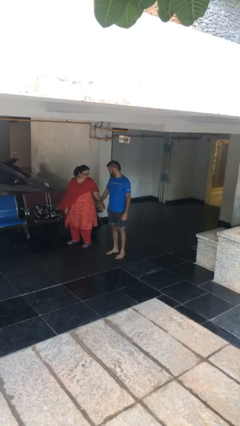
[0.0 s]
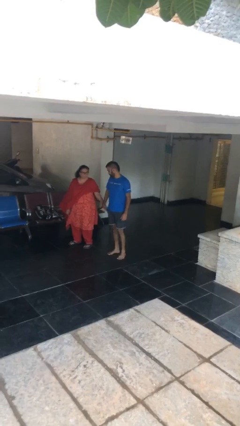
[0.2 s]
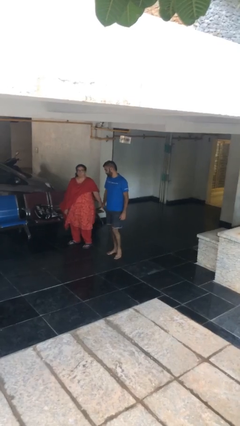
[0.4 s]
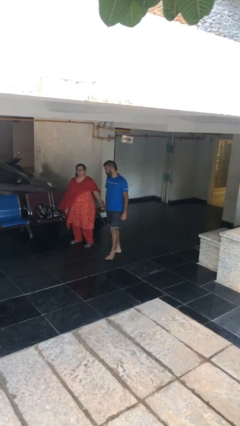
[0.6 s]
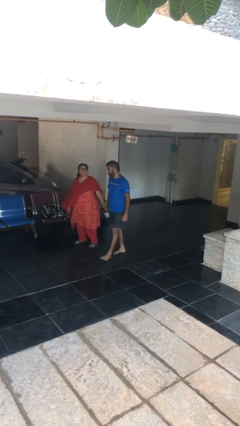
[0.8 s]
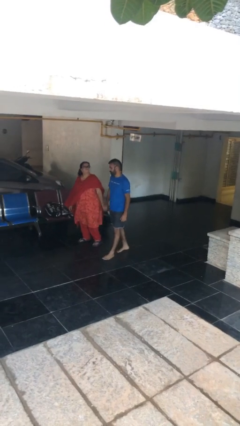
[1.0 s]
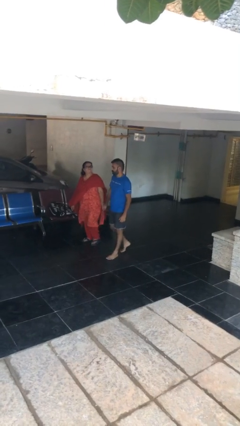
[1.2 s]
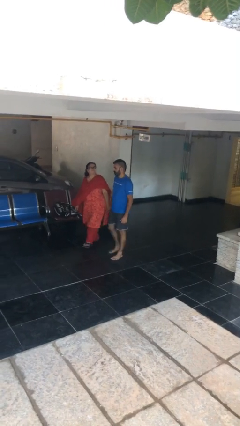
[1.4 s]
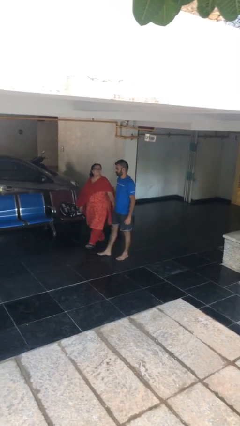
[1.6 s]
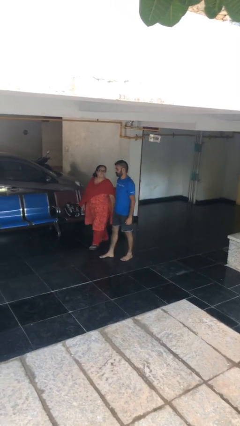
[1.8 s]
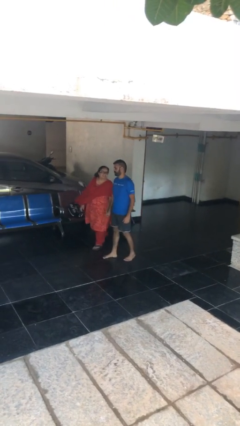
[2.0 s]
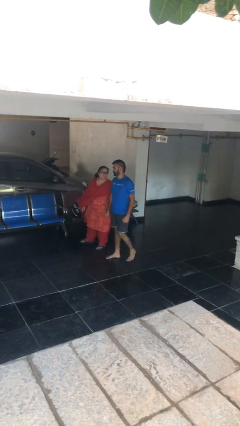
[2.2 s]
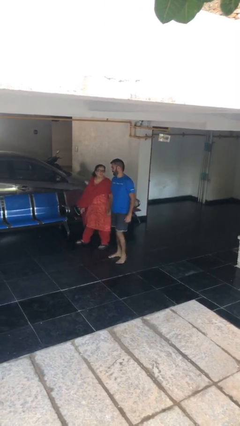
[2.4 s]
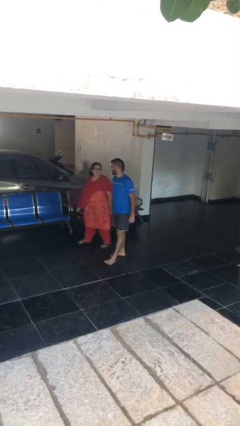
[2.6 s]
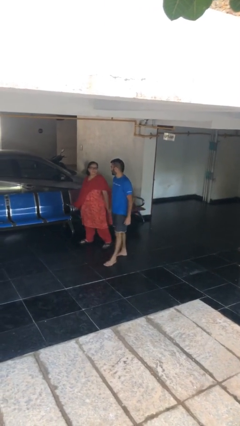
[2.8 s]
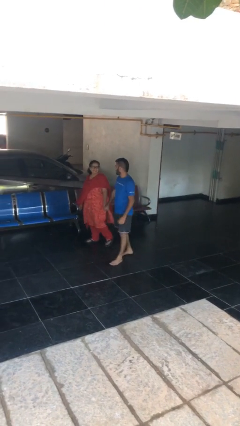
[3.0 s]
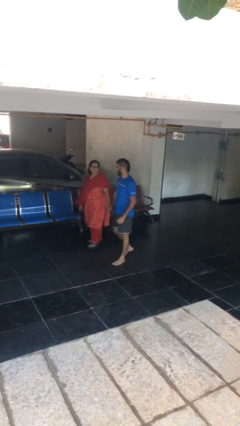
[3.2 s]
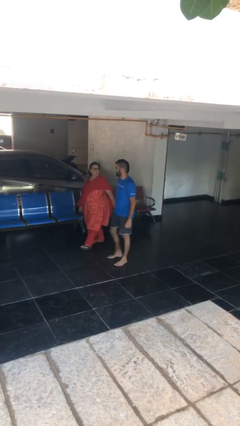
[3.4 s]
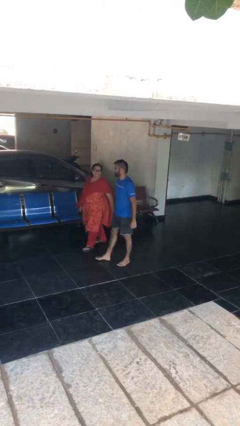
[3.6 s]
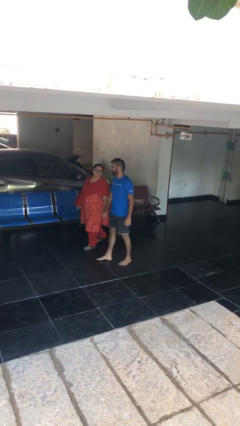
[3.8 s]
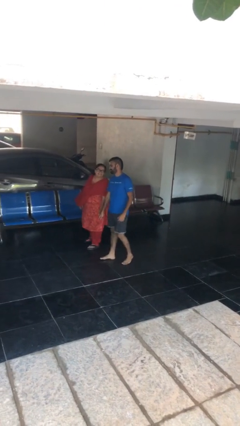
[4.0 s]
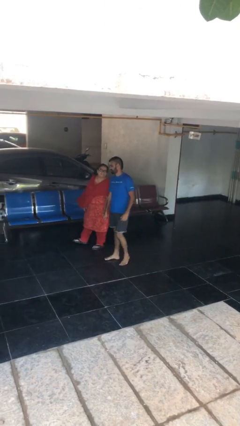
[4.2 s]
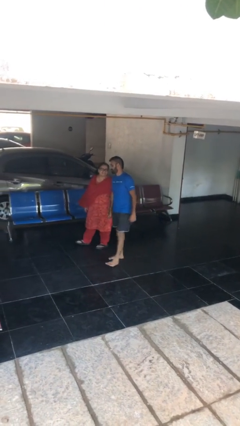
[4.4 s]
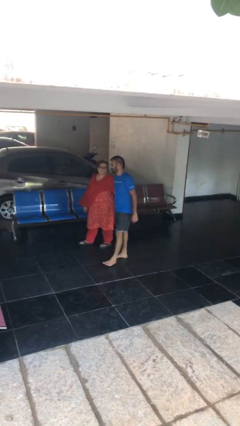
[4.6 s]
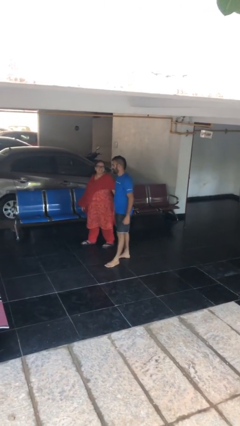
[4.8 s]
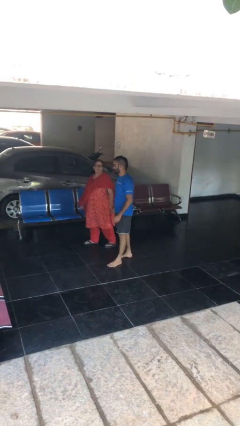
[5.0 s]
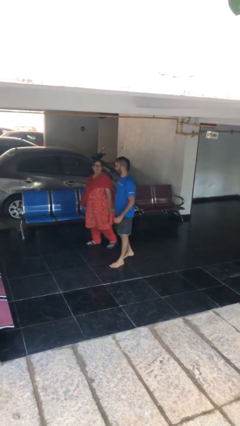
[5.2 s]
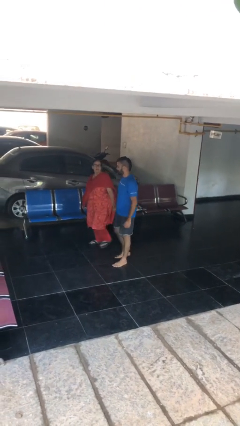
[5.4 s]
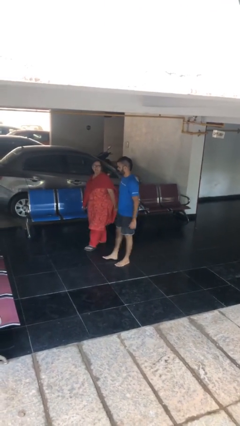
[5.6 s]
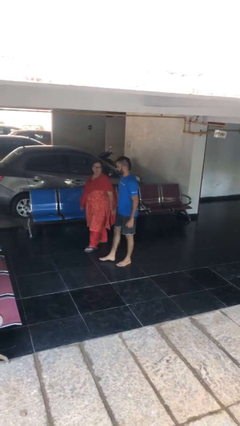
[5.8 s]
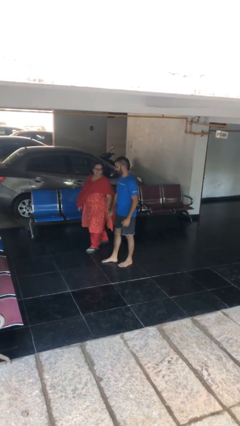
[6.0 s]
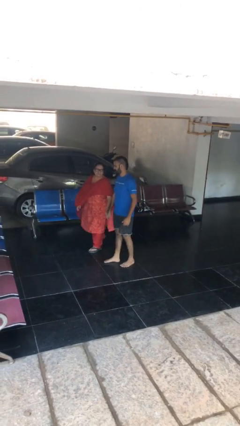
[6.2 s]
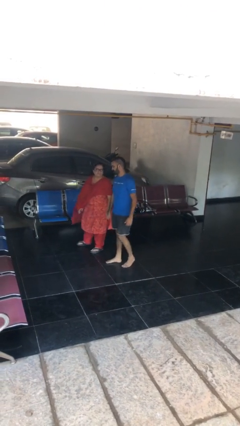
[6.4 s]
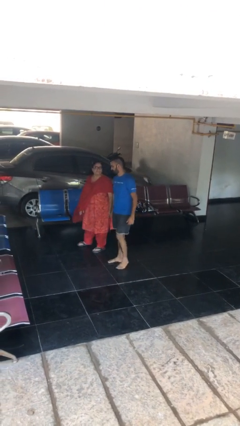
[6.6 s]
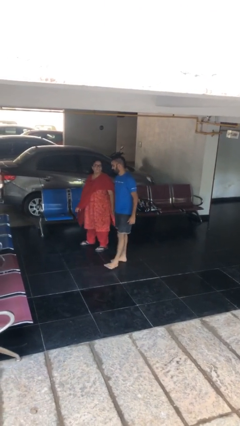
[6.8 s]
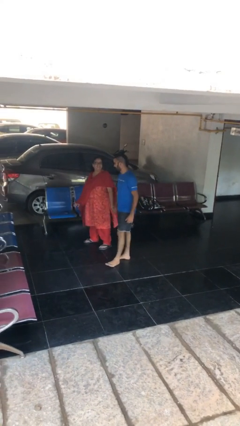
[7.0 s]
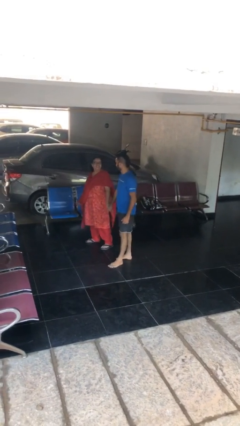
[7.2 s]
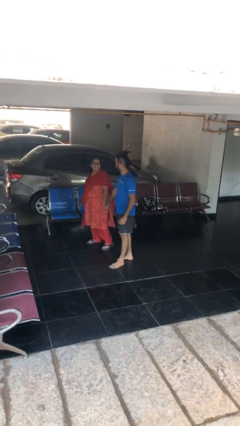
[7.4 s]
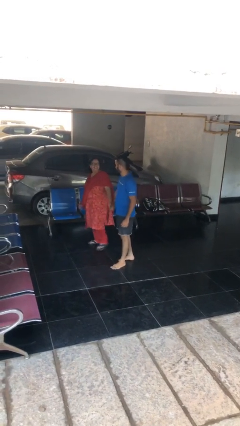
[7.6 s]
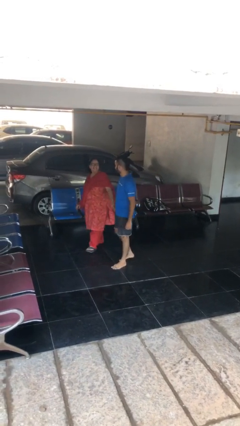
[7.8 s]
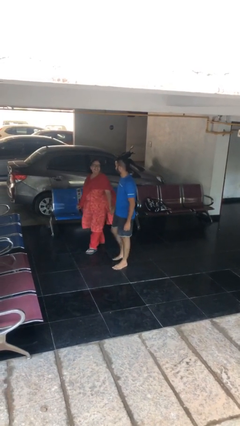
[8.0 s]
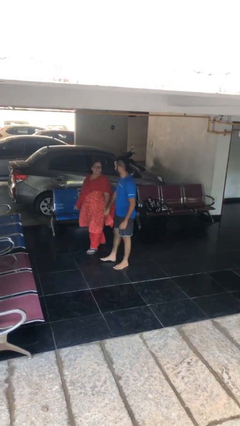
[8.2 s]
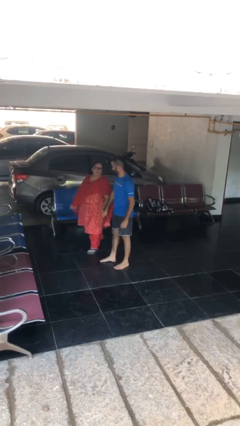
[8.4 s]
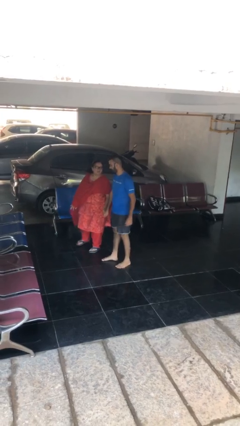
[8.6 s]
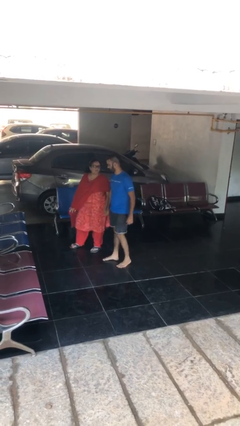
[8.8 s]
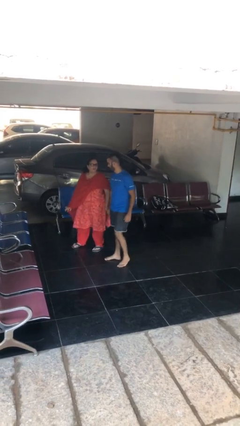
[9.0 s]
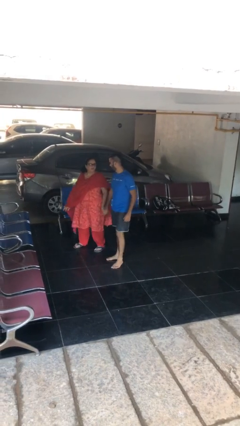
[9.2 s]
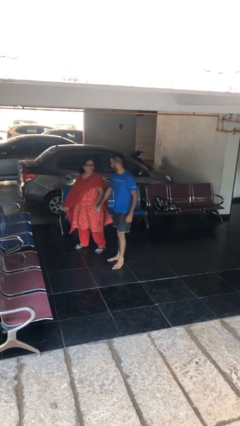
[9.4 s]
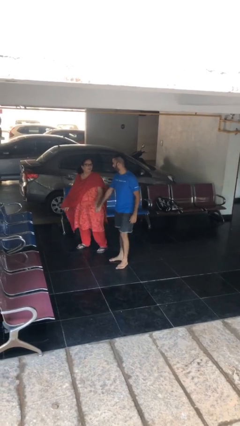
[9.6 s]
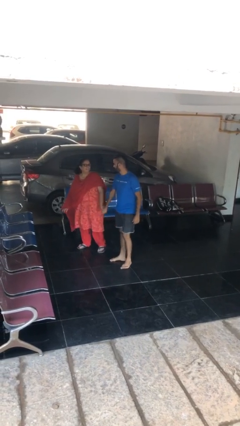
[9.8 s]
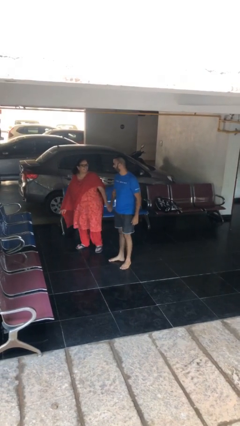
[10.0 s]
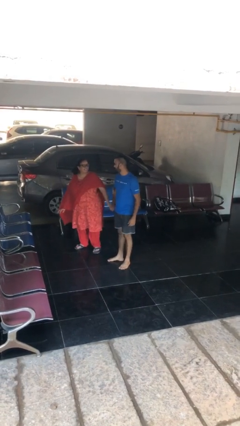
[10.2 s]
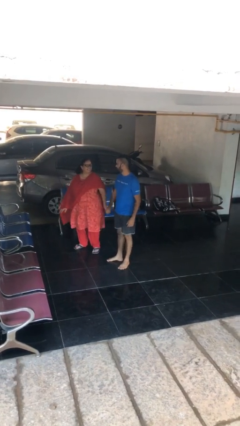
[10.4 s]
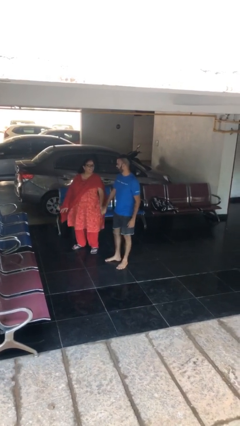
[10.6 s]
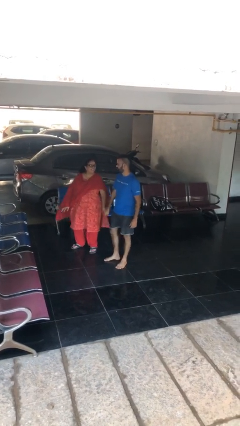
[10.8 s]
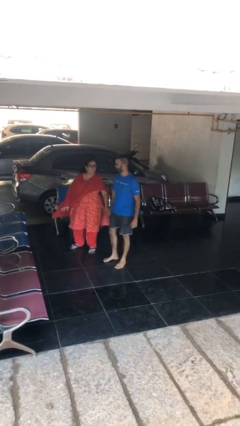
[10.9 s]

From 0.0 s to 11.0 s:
person holds hand

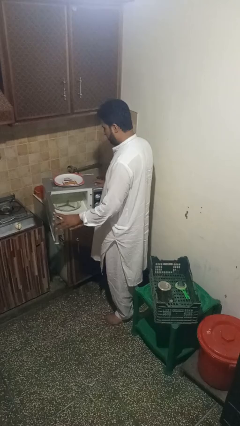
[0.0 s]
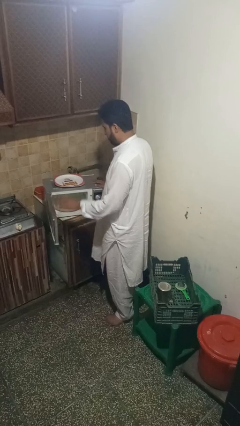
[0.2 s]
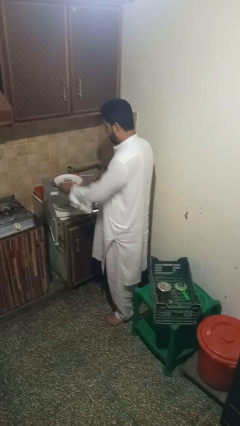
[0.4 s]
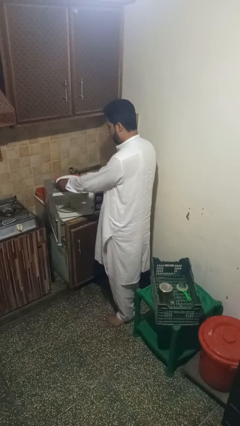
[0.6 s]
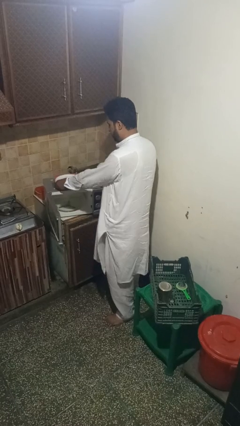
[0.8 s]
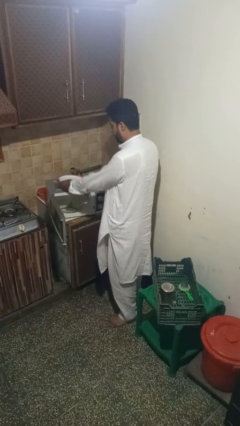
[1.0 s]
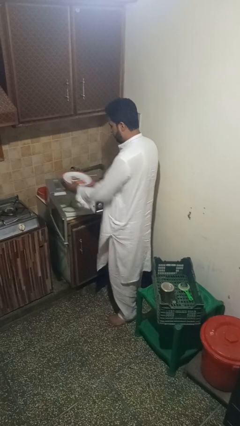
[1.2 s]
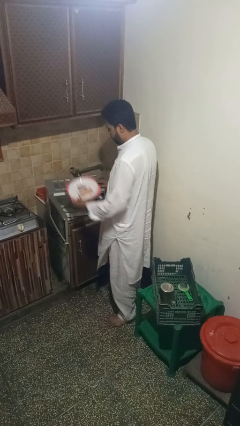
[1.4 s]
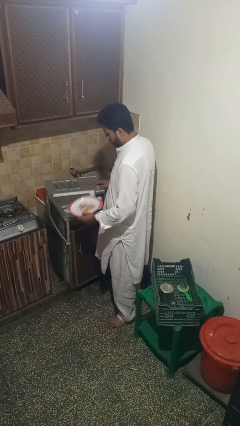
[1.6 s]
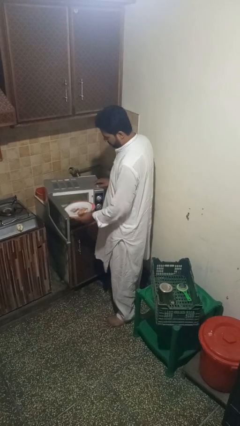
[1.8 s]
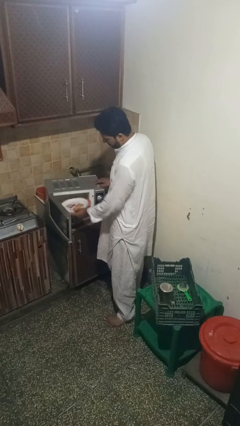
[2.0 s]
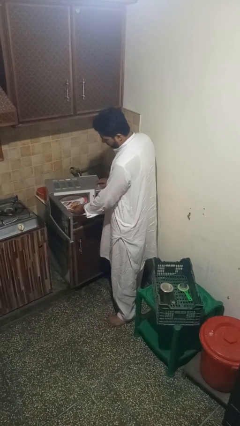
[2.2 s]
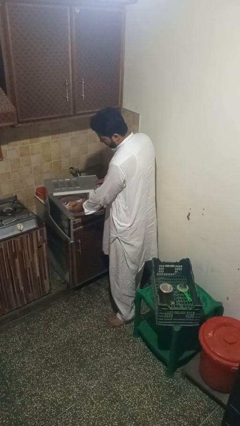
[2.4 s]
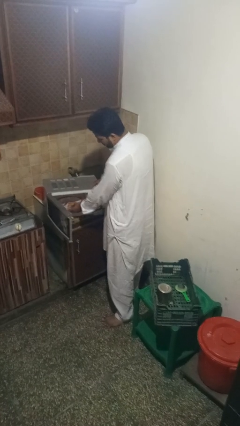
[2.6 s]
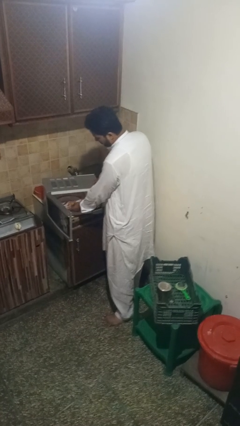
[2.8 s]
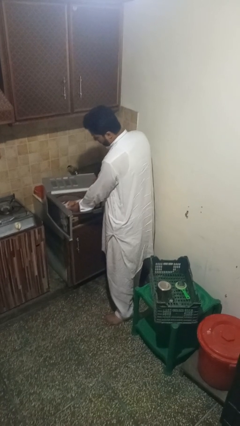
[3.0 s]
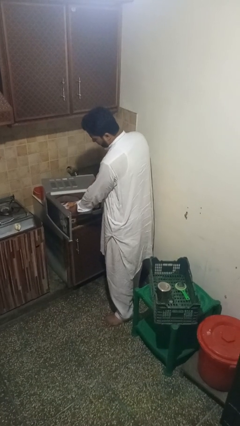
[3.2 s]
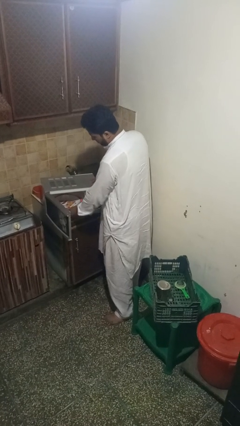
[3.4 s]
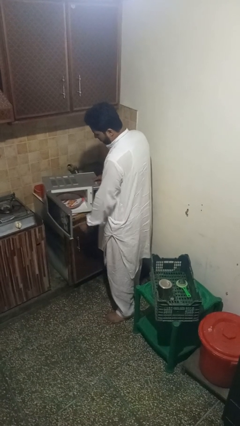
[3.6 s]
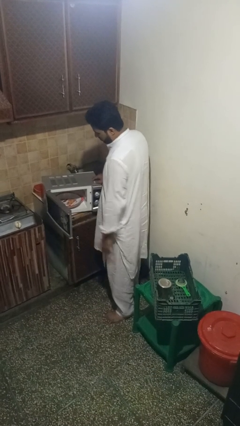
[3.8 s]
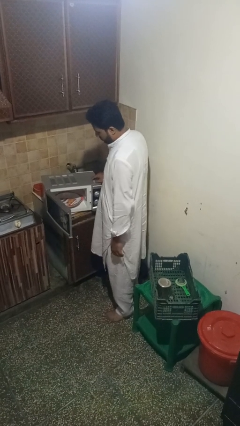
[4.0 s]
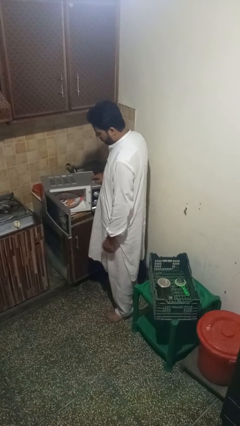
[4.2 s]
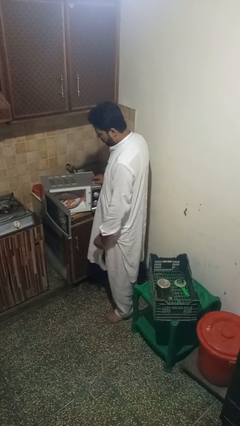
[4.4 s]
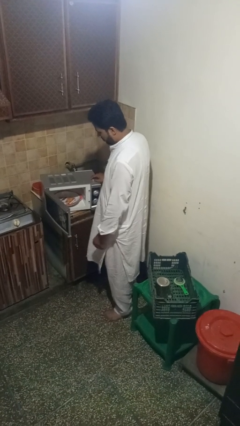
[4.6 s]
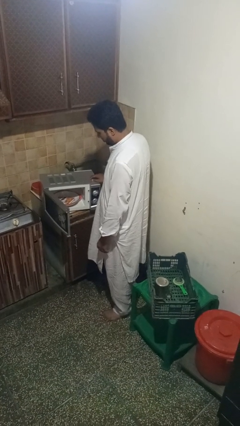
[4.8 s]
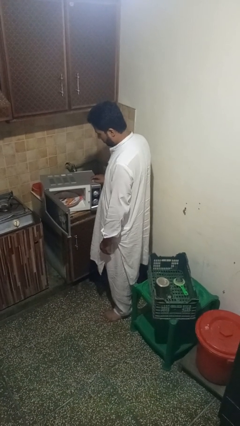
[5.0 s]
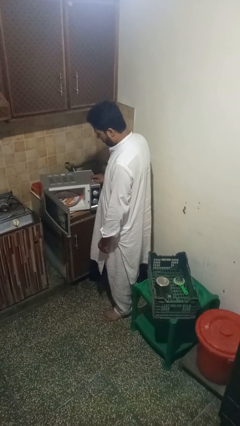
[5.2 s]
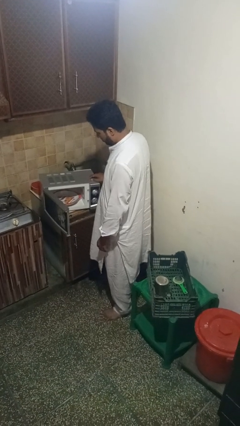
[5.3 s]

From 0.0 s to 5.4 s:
person puts object into microwave

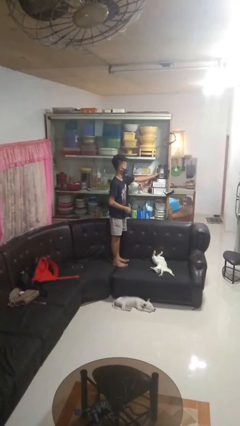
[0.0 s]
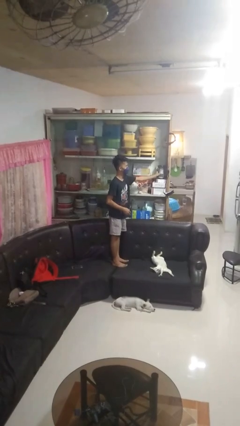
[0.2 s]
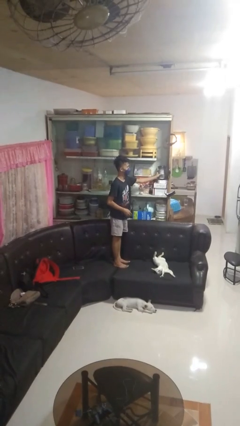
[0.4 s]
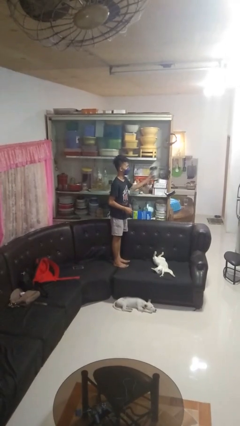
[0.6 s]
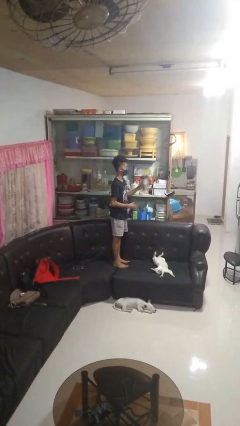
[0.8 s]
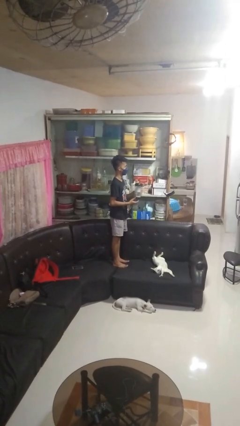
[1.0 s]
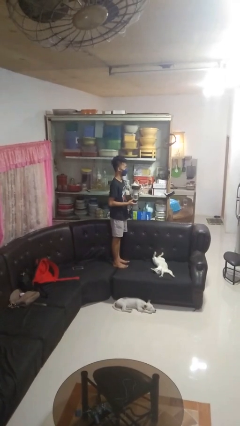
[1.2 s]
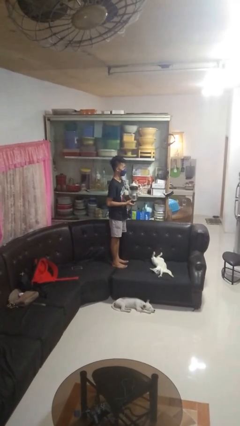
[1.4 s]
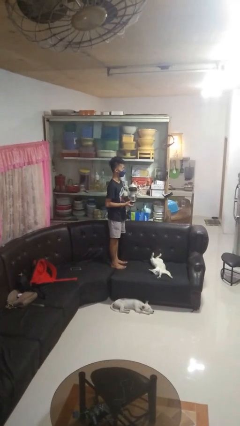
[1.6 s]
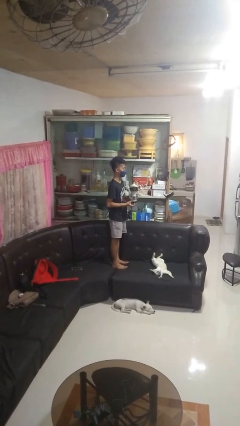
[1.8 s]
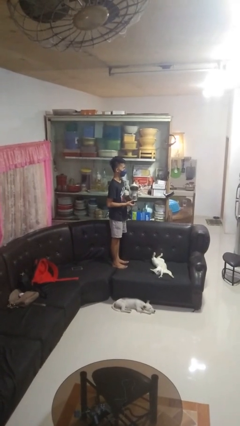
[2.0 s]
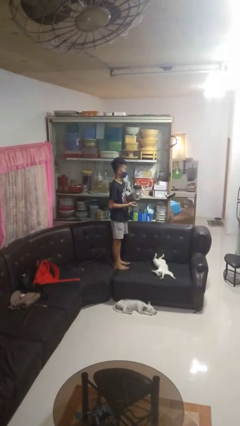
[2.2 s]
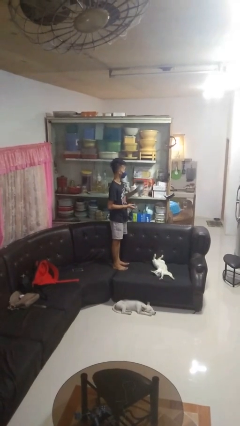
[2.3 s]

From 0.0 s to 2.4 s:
person picks up object from cabinet
